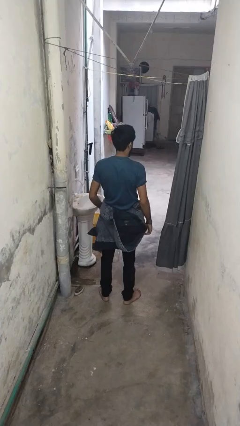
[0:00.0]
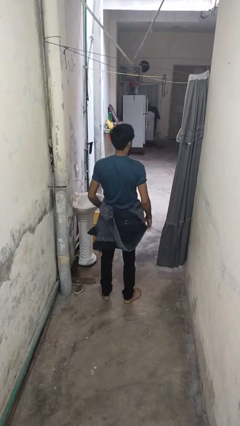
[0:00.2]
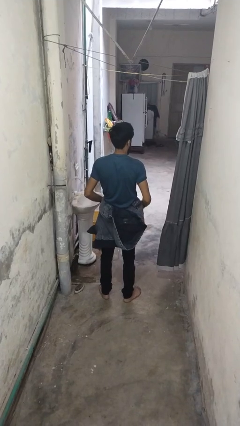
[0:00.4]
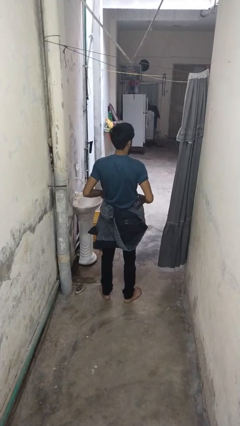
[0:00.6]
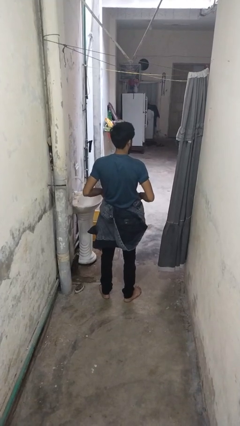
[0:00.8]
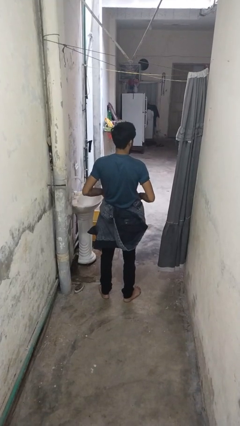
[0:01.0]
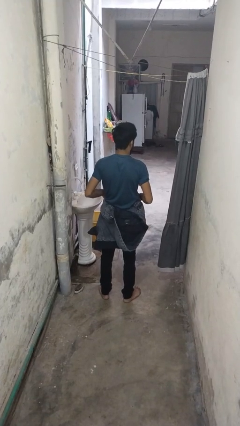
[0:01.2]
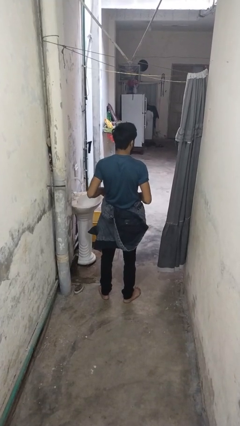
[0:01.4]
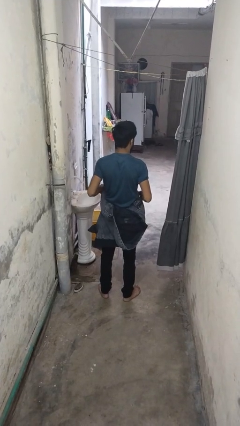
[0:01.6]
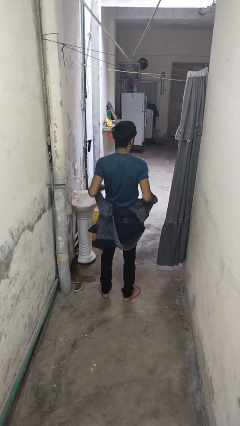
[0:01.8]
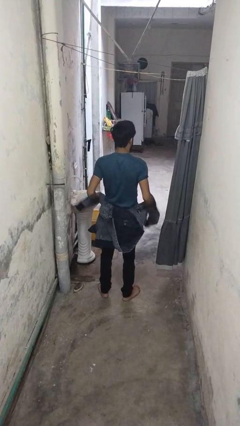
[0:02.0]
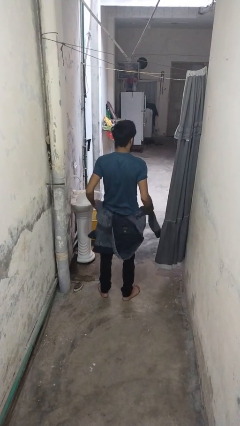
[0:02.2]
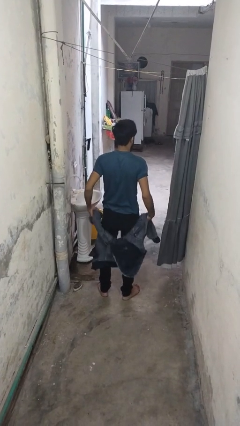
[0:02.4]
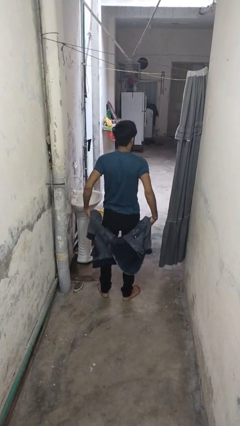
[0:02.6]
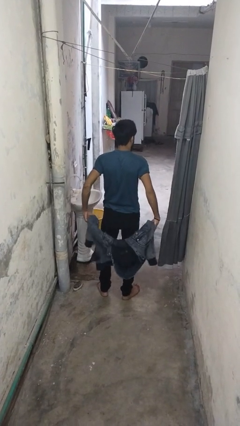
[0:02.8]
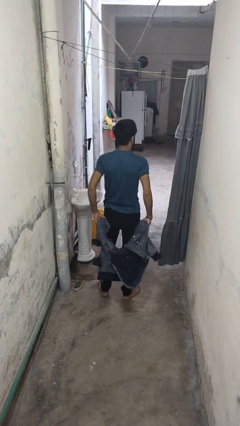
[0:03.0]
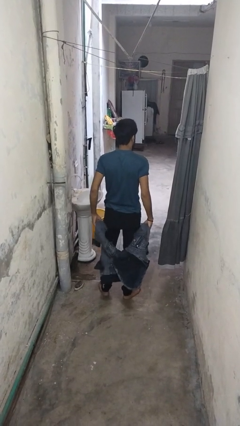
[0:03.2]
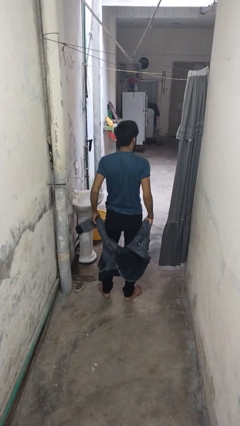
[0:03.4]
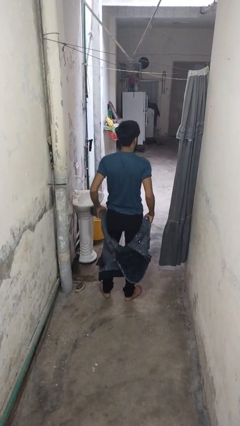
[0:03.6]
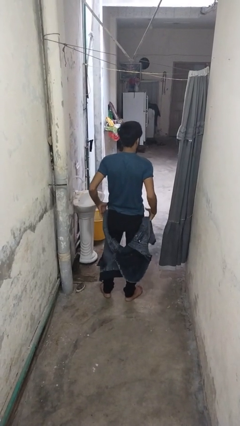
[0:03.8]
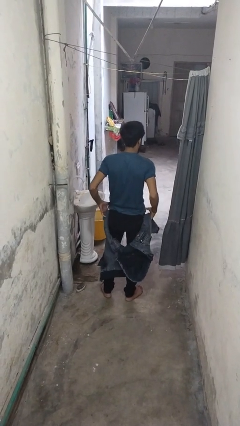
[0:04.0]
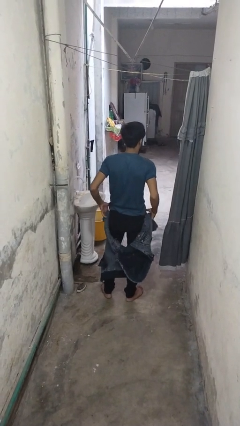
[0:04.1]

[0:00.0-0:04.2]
person unties jacket around waist

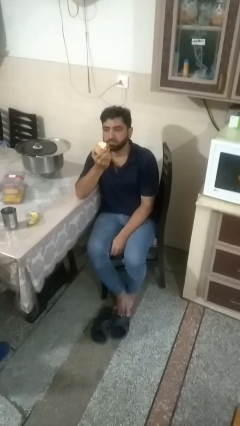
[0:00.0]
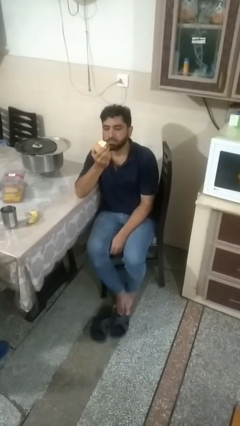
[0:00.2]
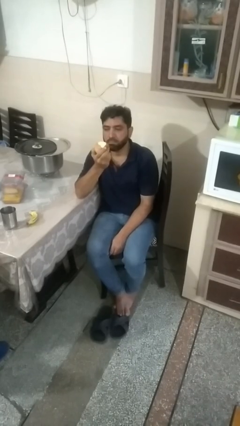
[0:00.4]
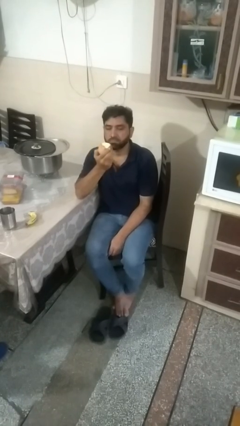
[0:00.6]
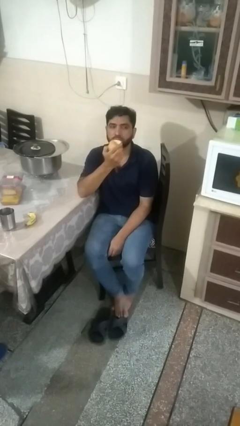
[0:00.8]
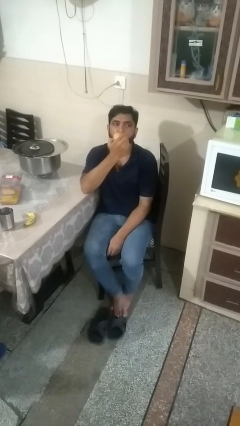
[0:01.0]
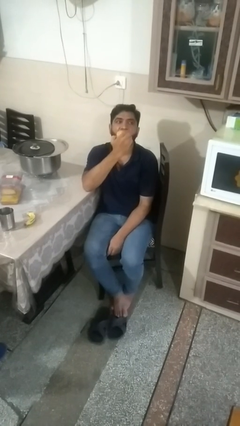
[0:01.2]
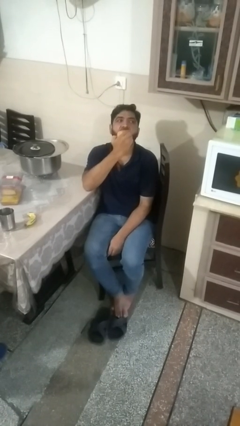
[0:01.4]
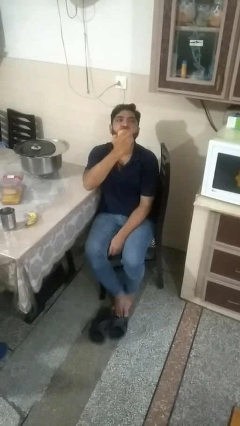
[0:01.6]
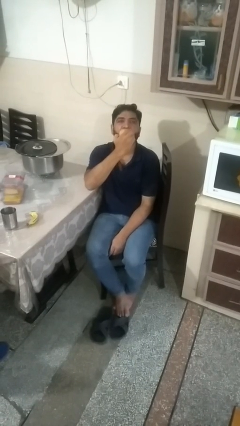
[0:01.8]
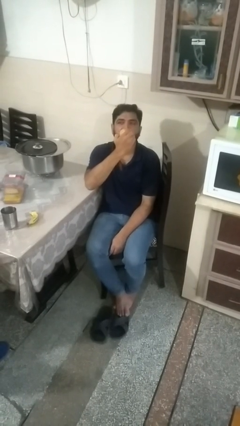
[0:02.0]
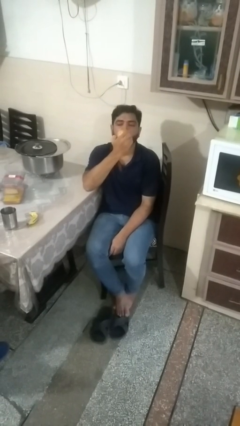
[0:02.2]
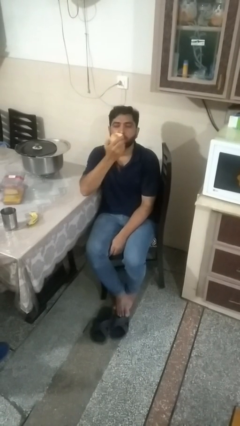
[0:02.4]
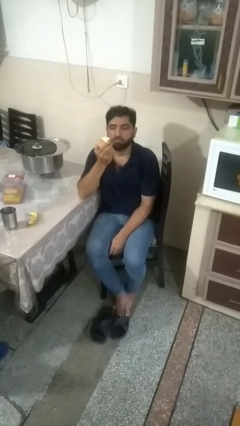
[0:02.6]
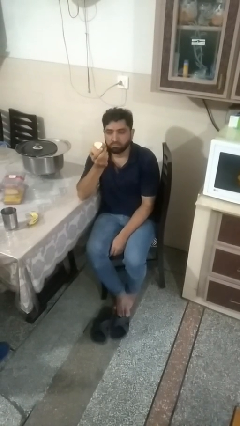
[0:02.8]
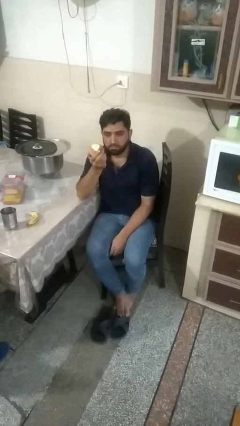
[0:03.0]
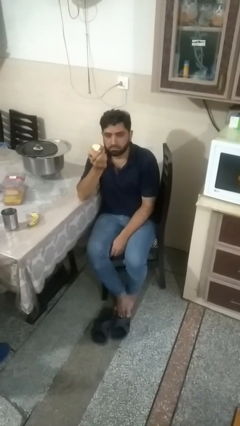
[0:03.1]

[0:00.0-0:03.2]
person eats apple

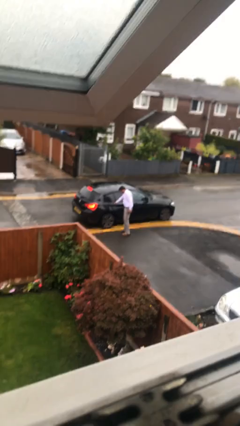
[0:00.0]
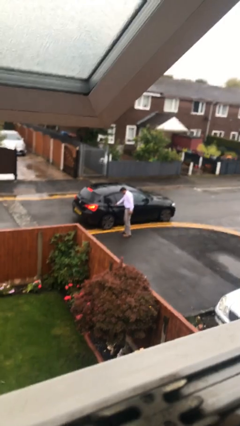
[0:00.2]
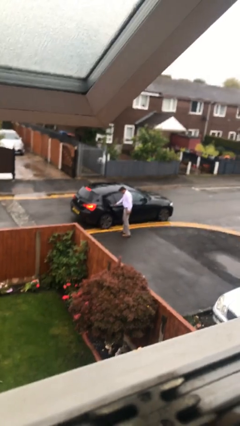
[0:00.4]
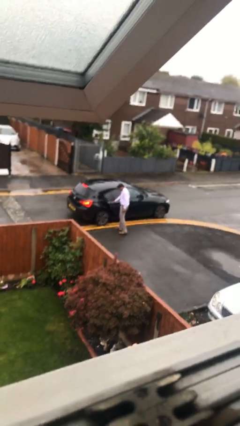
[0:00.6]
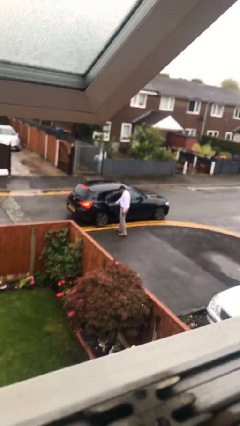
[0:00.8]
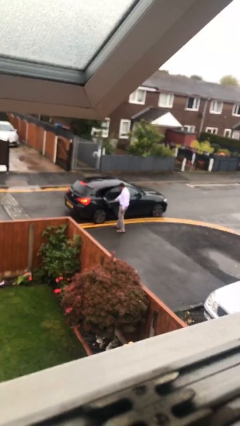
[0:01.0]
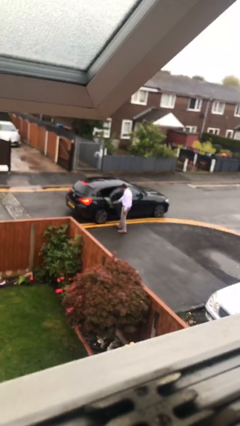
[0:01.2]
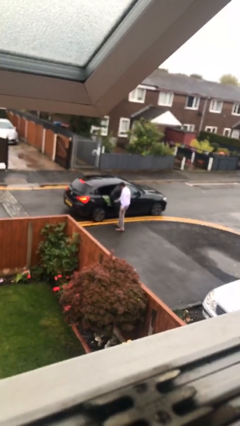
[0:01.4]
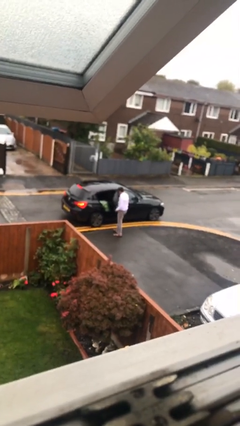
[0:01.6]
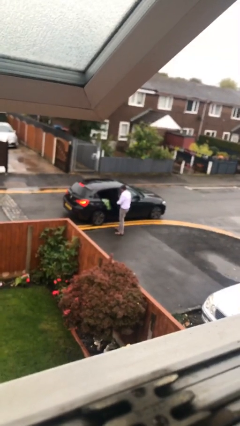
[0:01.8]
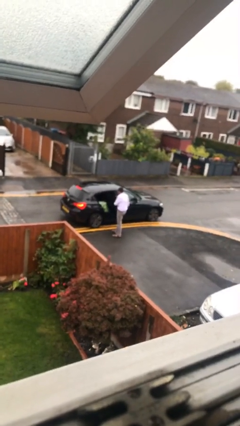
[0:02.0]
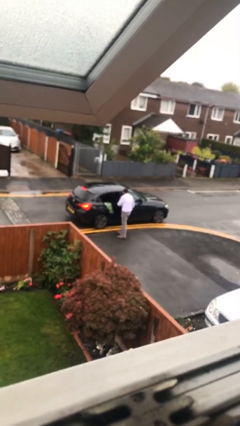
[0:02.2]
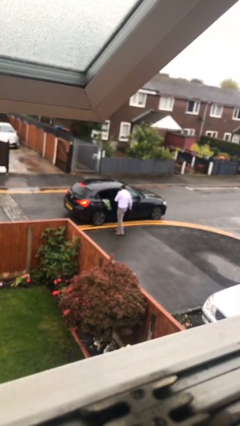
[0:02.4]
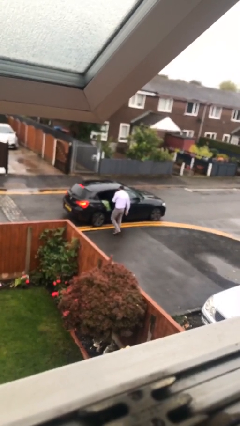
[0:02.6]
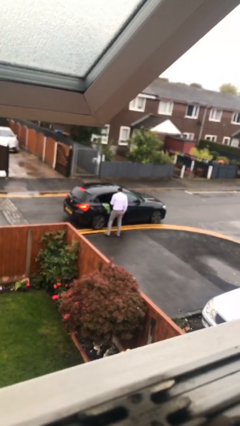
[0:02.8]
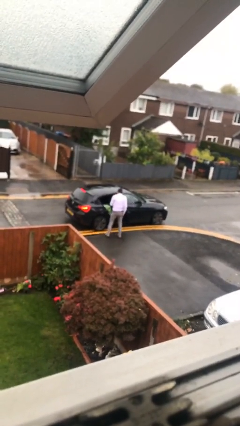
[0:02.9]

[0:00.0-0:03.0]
person opens car door

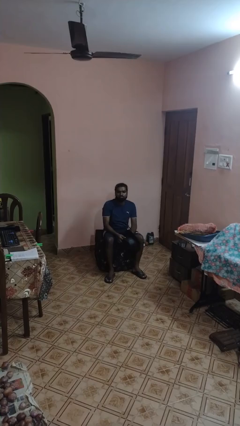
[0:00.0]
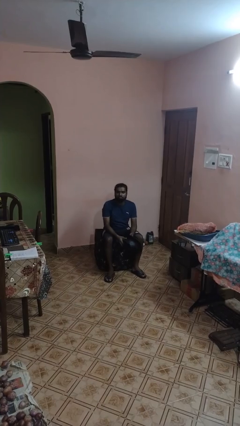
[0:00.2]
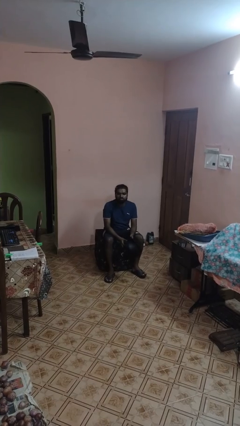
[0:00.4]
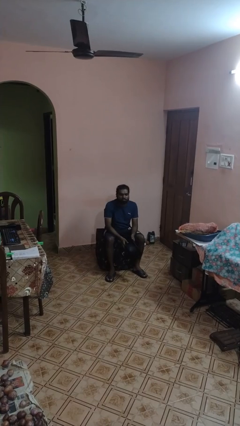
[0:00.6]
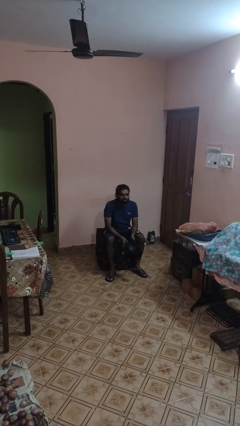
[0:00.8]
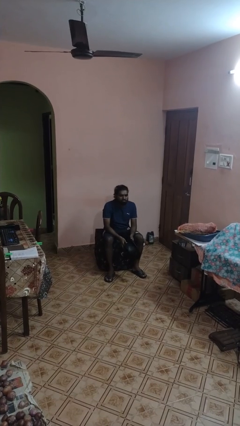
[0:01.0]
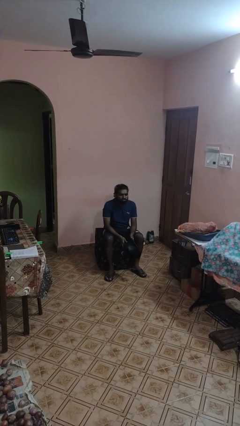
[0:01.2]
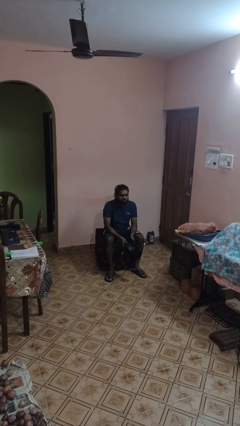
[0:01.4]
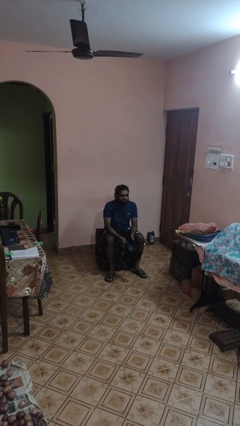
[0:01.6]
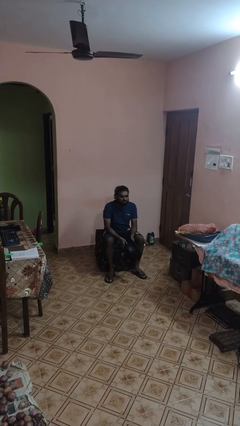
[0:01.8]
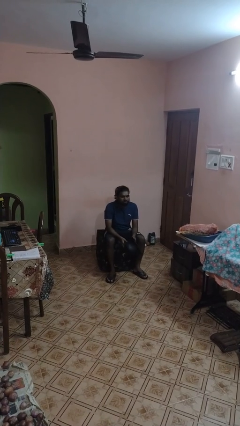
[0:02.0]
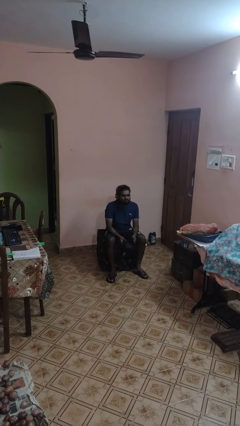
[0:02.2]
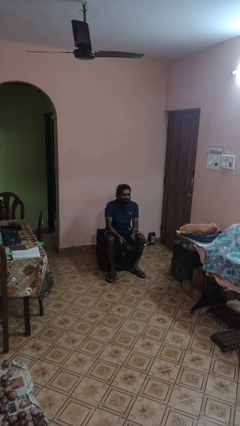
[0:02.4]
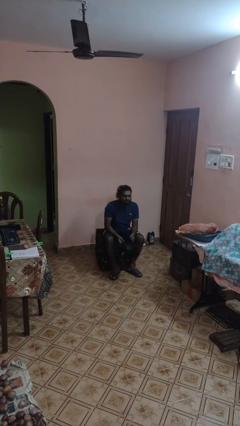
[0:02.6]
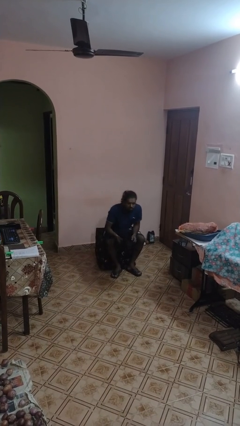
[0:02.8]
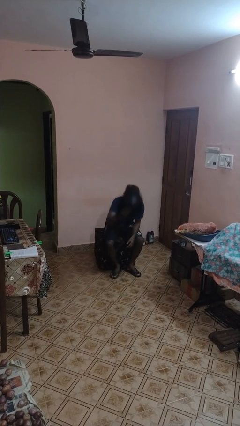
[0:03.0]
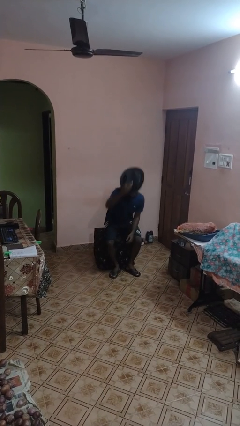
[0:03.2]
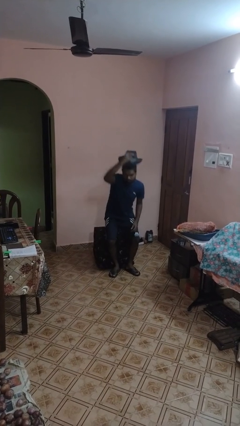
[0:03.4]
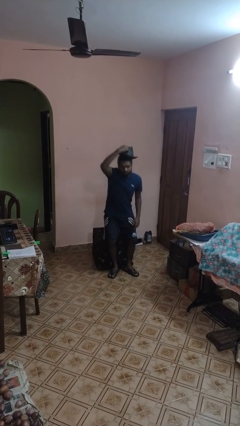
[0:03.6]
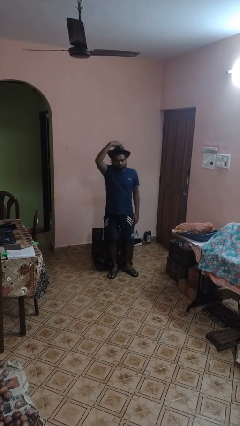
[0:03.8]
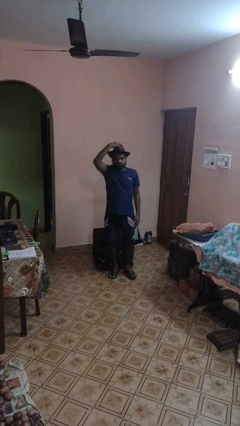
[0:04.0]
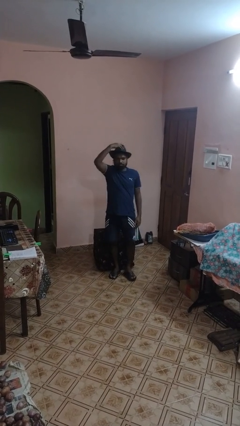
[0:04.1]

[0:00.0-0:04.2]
person takes off hat

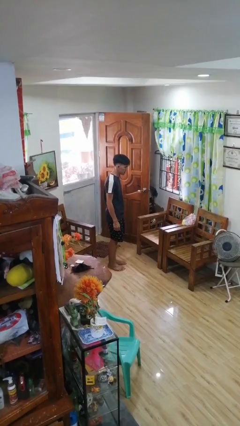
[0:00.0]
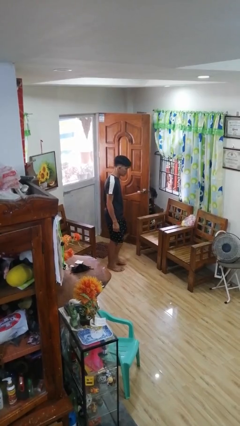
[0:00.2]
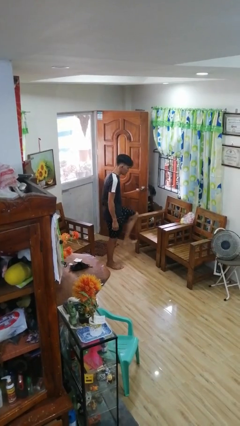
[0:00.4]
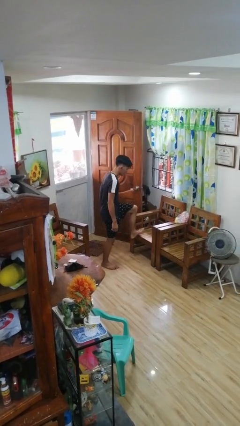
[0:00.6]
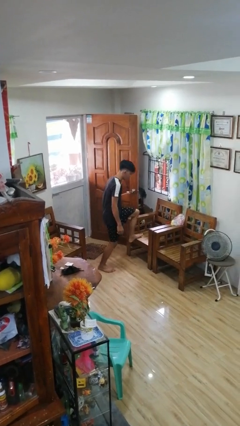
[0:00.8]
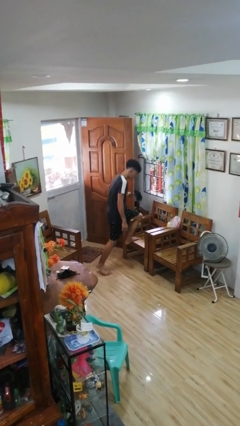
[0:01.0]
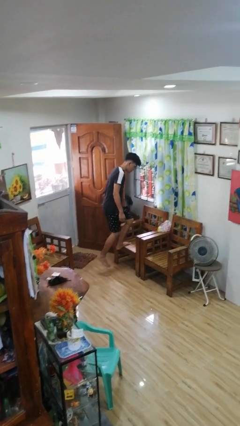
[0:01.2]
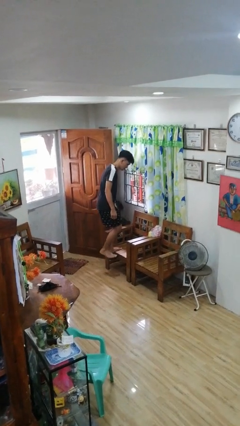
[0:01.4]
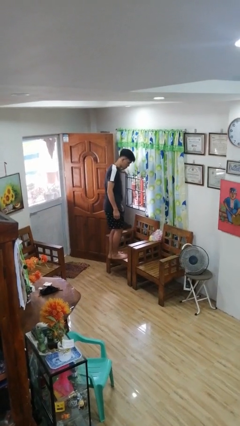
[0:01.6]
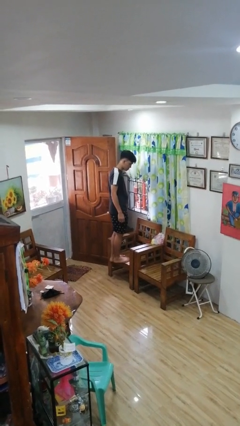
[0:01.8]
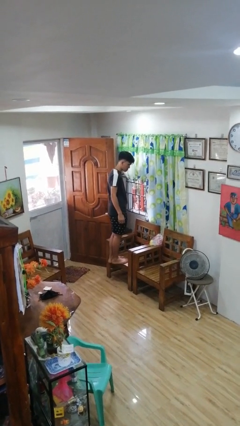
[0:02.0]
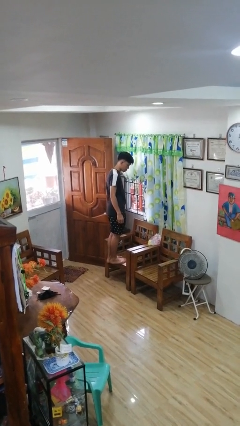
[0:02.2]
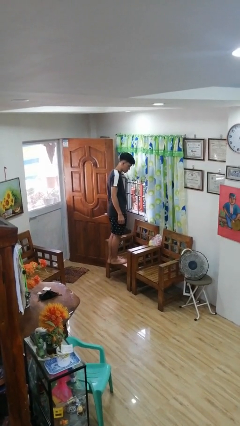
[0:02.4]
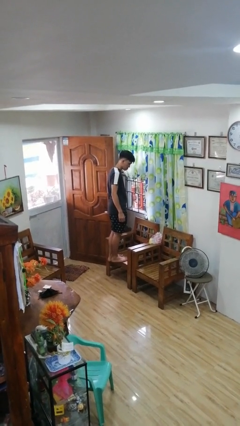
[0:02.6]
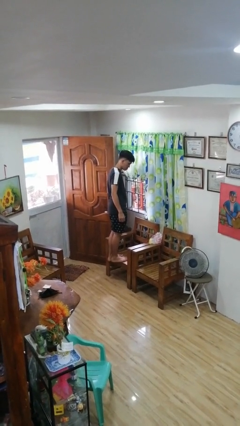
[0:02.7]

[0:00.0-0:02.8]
person climbs on chair

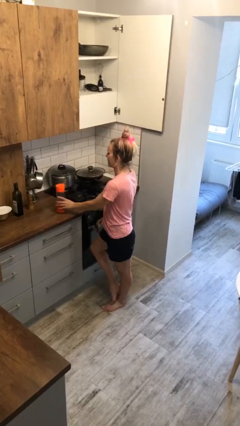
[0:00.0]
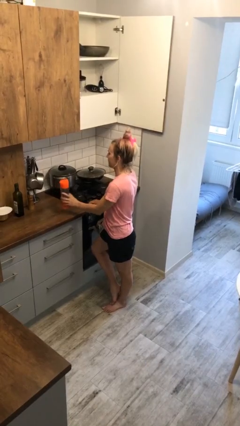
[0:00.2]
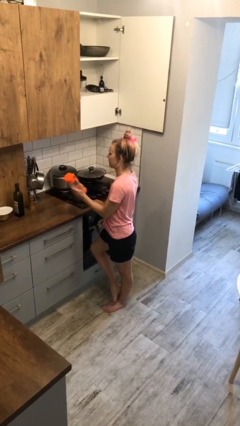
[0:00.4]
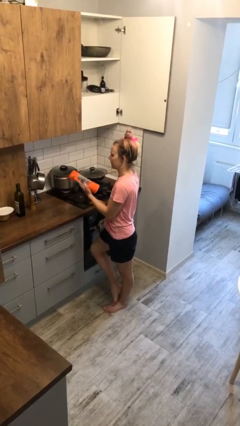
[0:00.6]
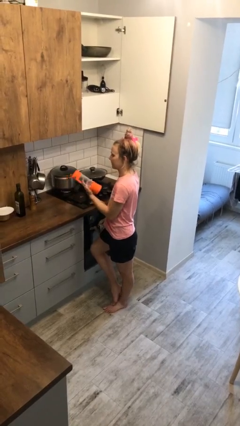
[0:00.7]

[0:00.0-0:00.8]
person picks up object from countertop
